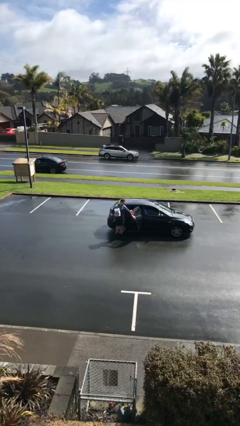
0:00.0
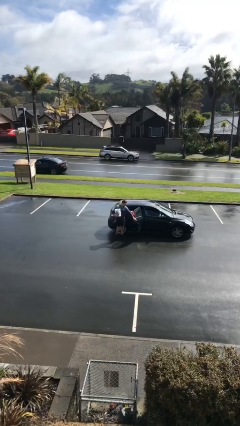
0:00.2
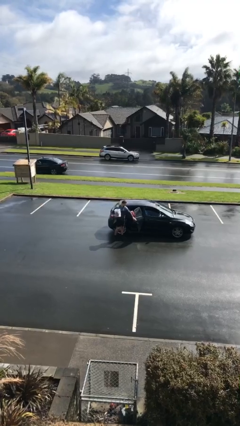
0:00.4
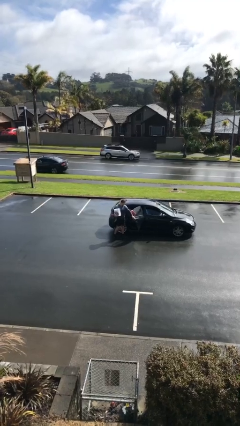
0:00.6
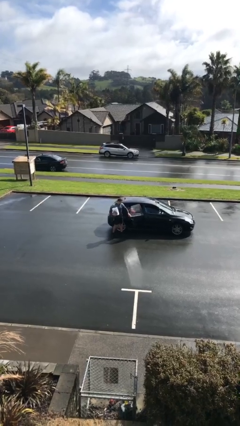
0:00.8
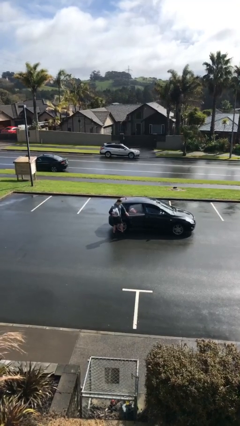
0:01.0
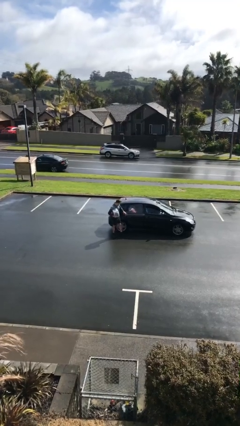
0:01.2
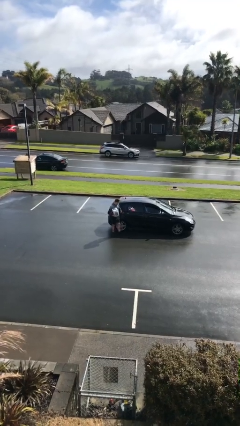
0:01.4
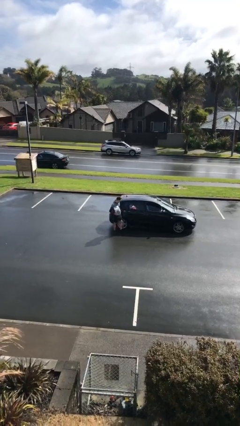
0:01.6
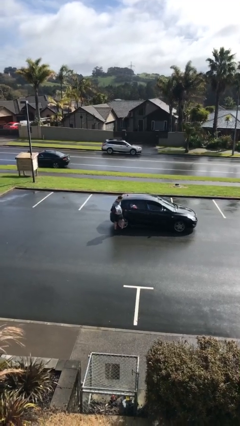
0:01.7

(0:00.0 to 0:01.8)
person closes car door

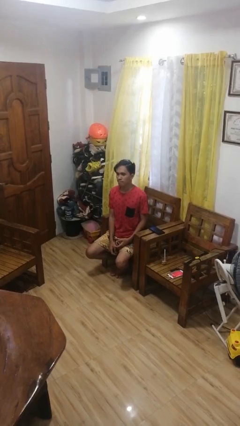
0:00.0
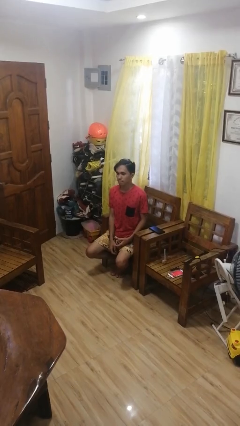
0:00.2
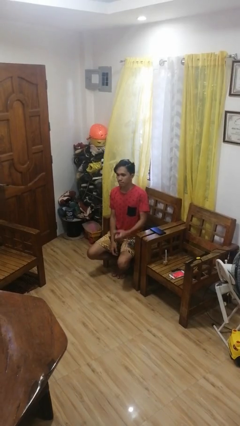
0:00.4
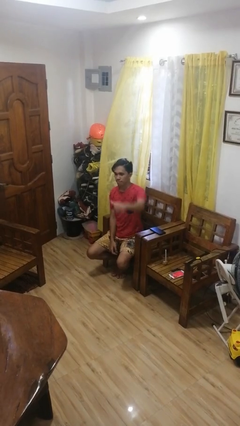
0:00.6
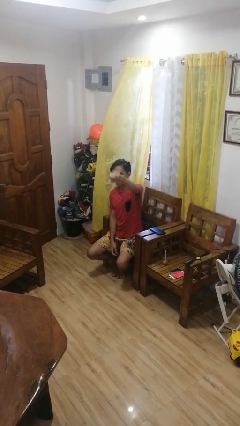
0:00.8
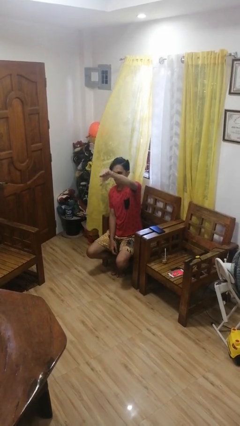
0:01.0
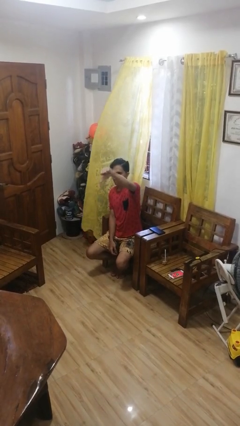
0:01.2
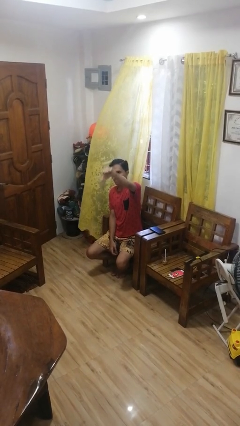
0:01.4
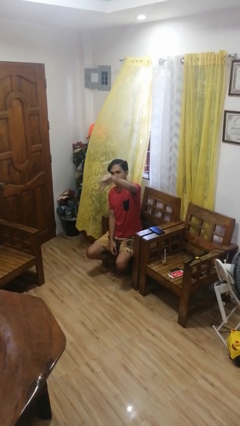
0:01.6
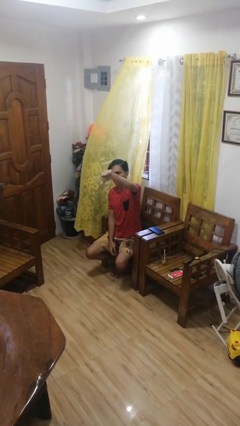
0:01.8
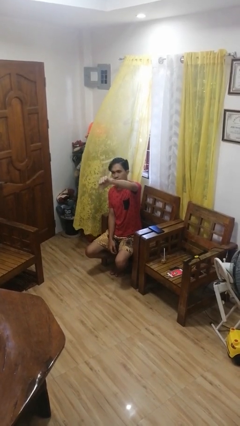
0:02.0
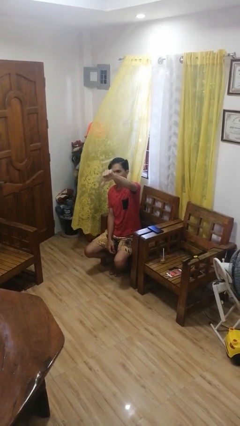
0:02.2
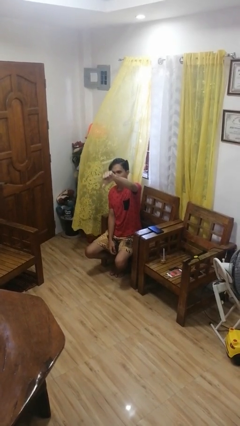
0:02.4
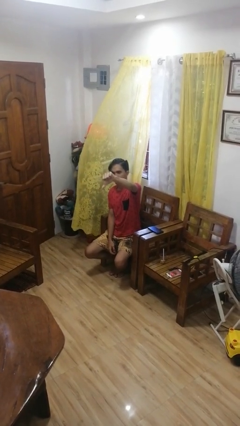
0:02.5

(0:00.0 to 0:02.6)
person gestures thumbs down

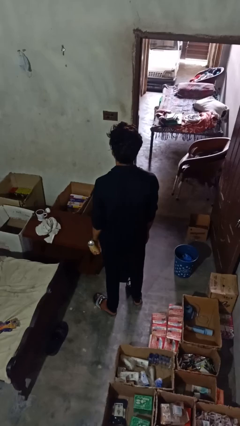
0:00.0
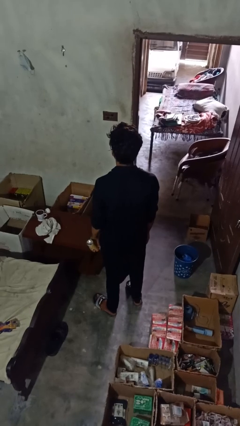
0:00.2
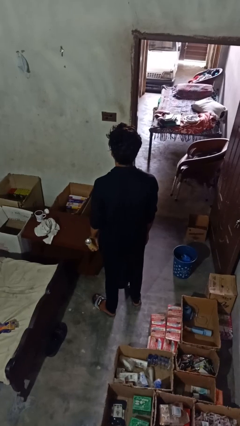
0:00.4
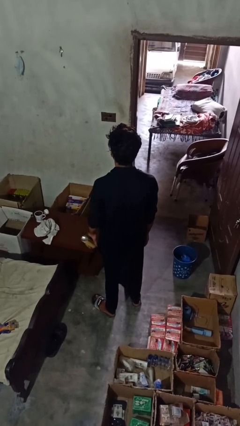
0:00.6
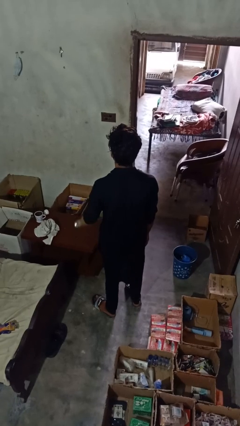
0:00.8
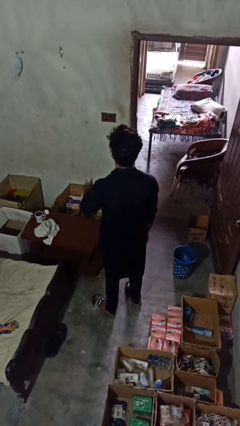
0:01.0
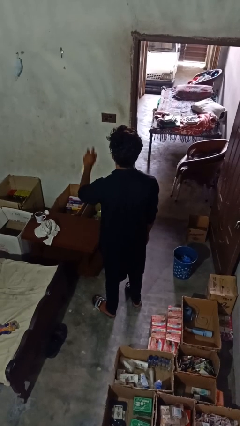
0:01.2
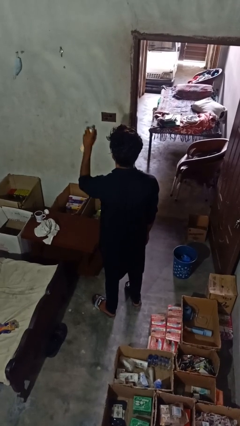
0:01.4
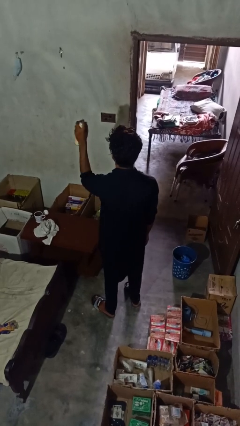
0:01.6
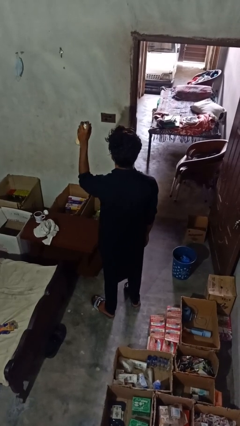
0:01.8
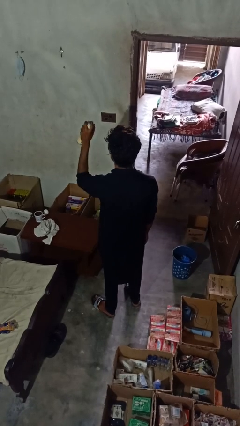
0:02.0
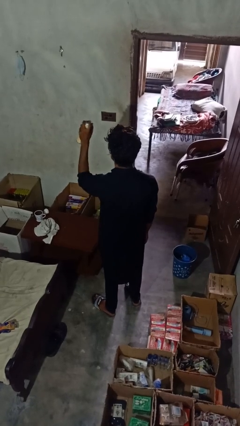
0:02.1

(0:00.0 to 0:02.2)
person sprays from bottle

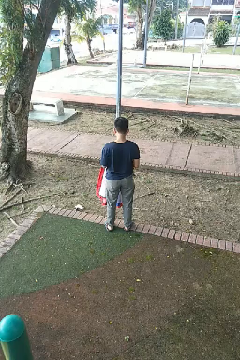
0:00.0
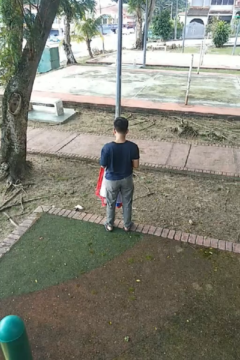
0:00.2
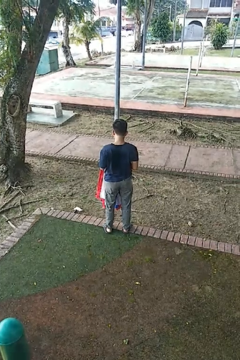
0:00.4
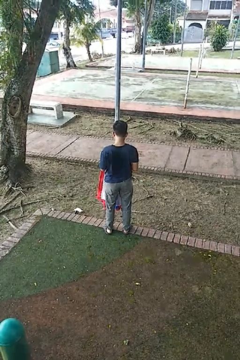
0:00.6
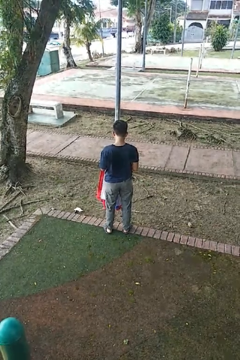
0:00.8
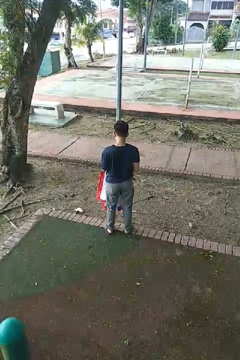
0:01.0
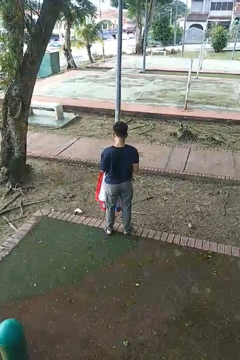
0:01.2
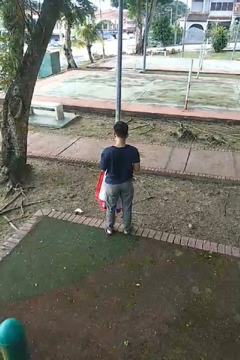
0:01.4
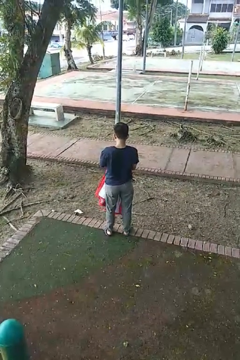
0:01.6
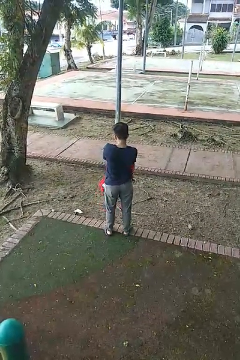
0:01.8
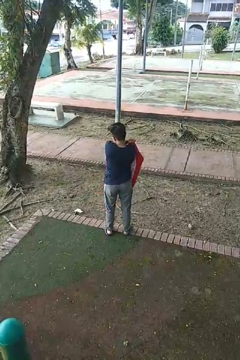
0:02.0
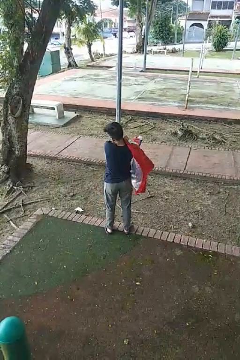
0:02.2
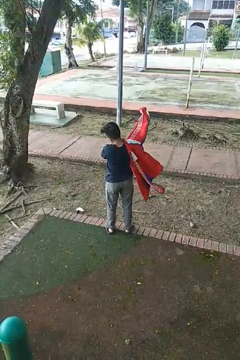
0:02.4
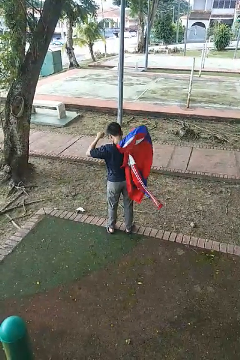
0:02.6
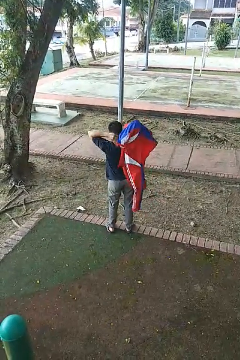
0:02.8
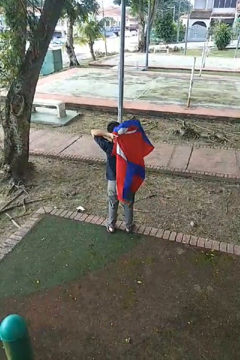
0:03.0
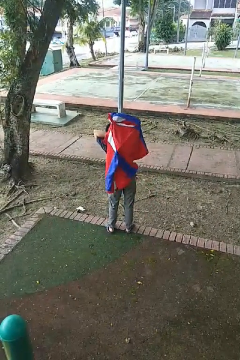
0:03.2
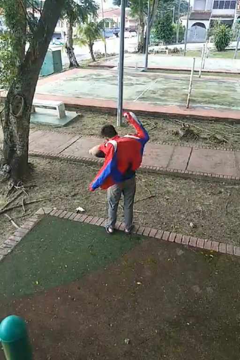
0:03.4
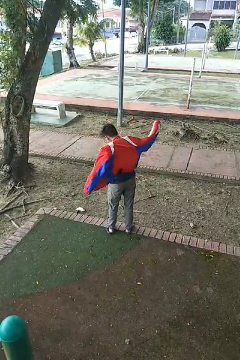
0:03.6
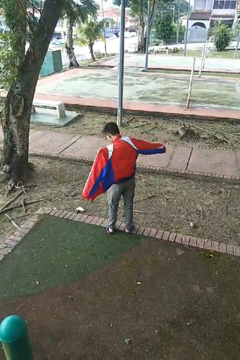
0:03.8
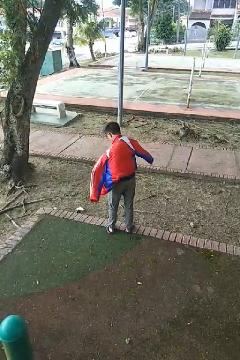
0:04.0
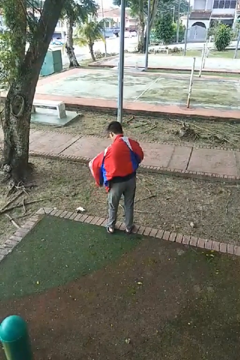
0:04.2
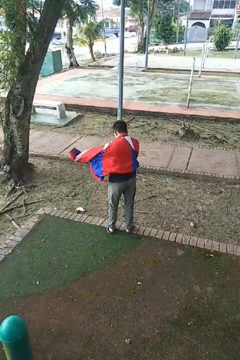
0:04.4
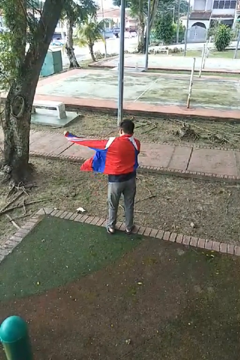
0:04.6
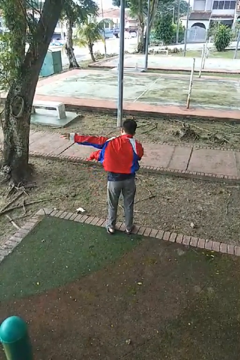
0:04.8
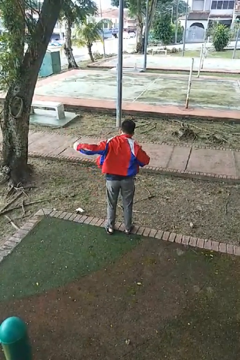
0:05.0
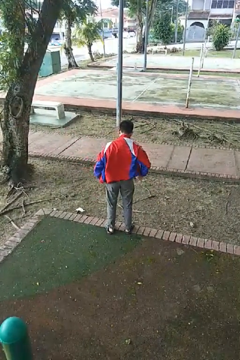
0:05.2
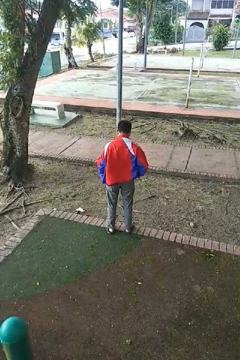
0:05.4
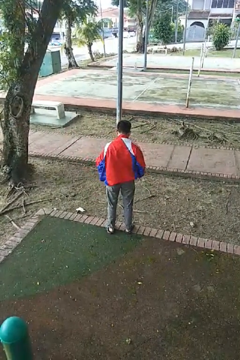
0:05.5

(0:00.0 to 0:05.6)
person puts on jacket

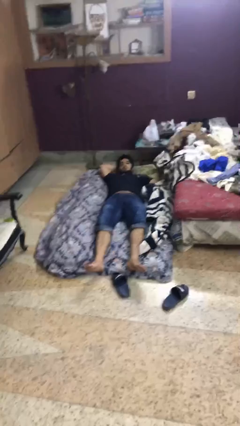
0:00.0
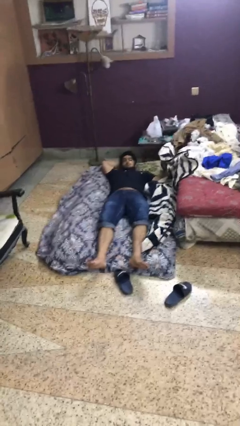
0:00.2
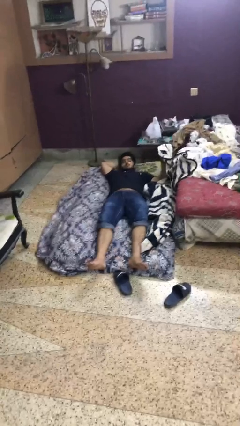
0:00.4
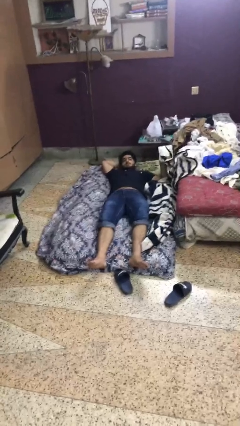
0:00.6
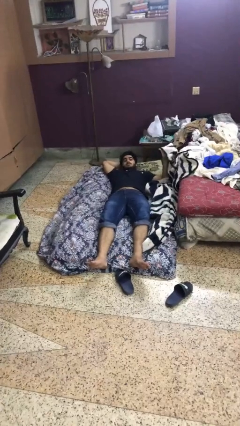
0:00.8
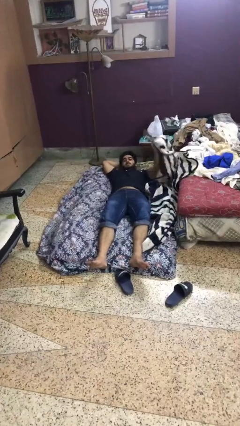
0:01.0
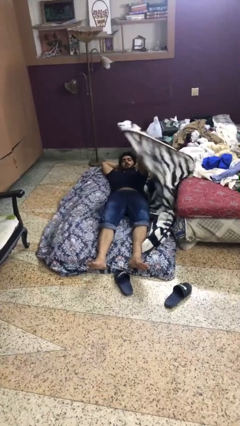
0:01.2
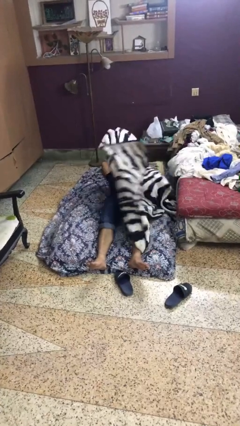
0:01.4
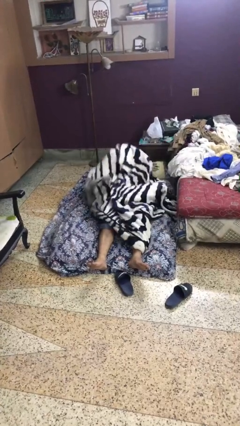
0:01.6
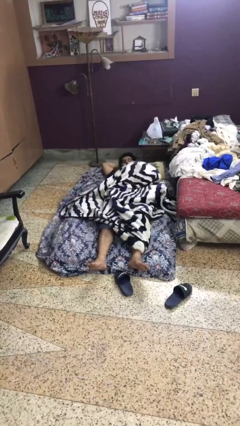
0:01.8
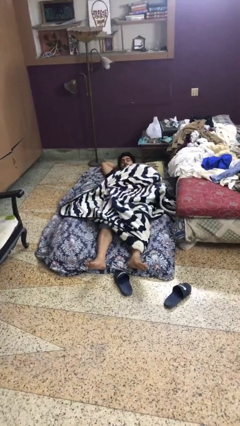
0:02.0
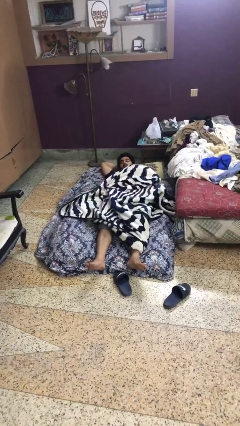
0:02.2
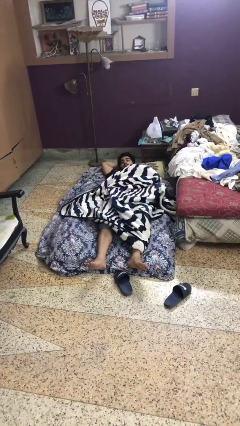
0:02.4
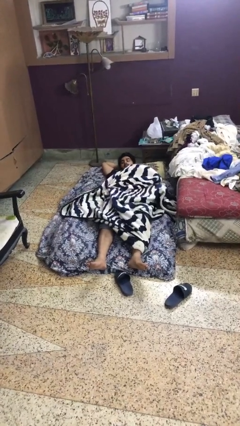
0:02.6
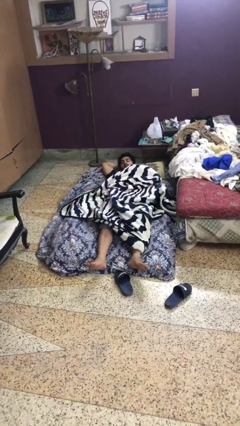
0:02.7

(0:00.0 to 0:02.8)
person covers with blanket

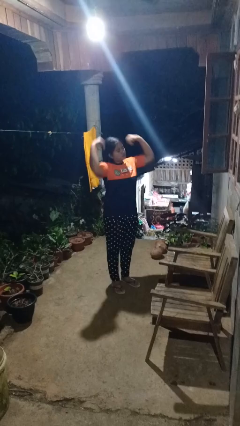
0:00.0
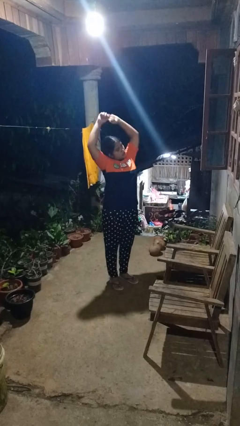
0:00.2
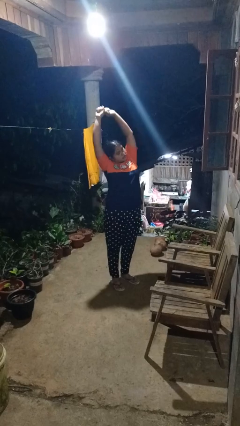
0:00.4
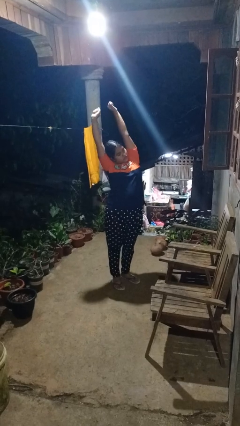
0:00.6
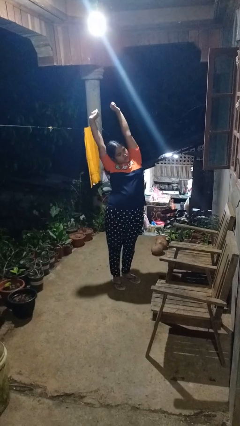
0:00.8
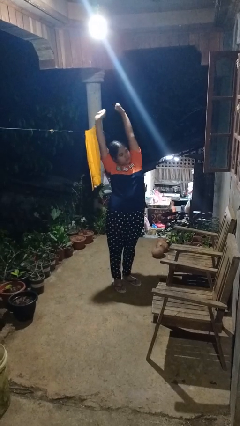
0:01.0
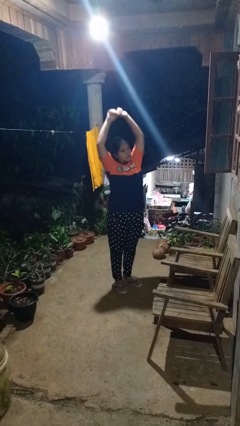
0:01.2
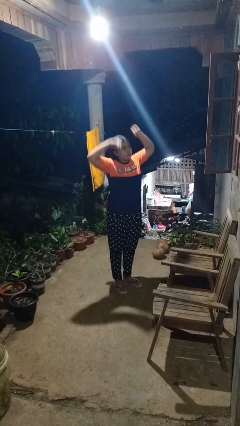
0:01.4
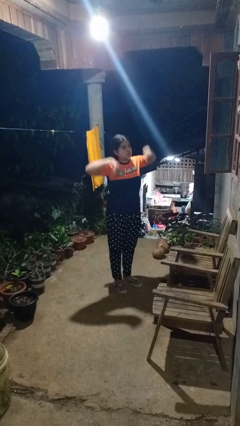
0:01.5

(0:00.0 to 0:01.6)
person stretches arms over head

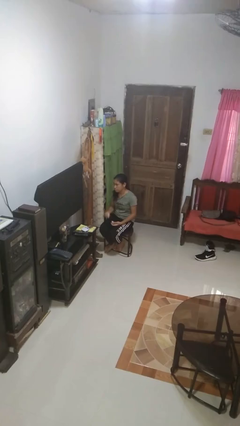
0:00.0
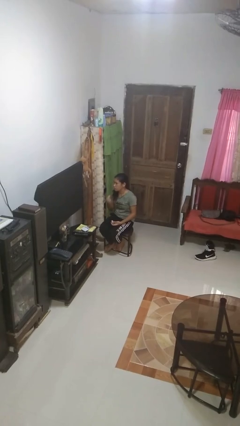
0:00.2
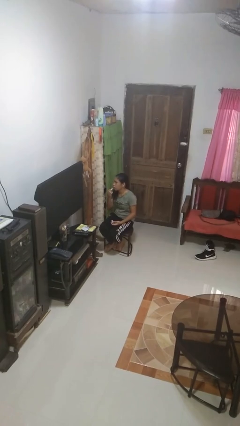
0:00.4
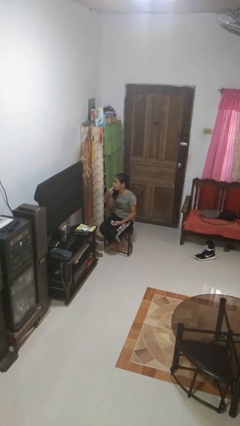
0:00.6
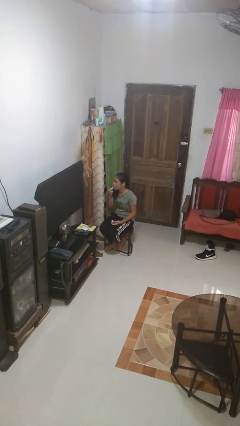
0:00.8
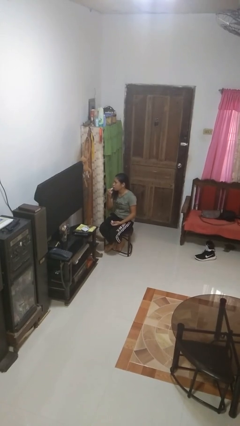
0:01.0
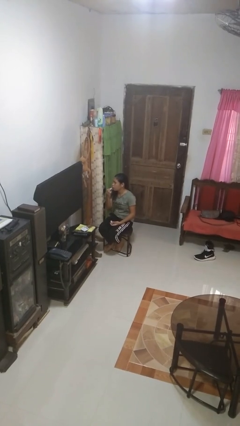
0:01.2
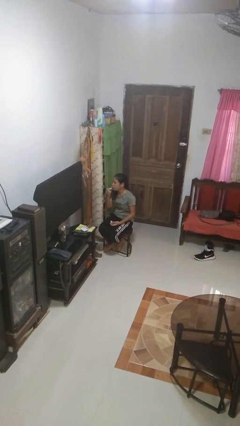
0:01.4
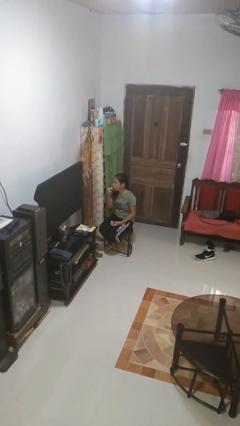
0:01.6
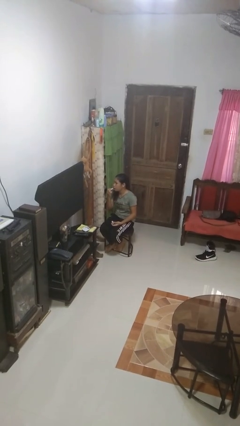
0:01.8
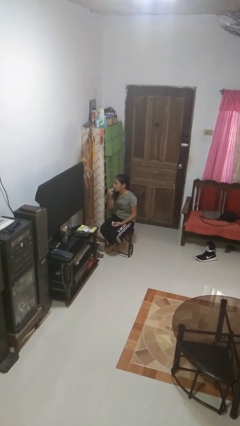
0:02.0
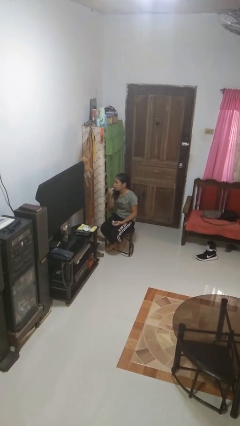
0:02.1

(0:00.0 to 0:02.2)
person applies lip makeup
